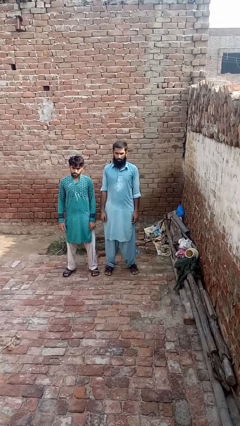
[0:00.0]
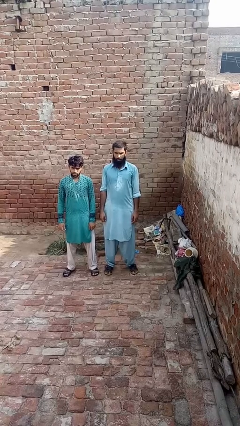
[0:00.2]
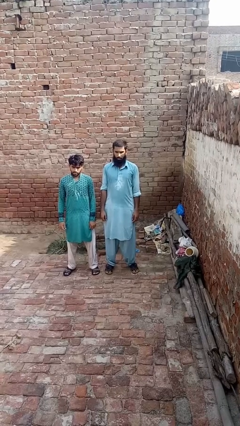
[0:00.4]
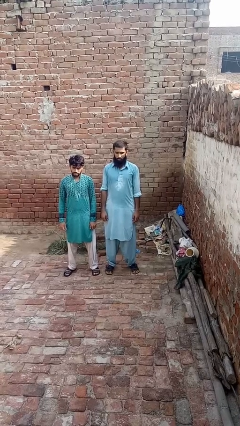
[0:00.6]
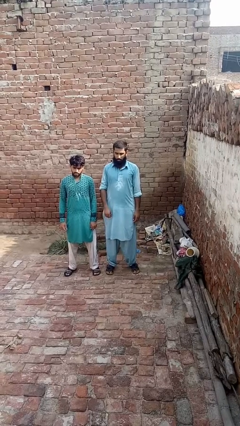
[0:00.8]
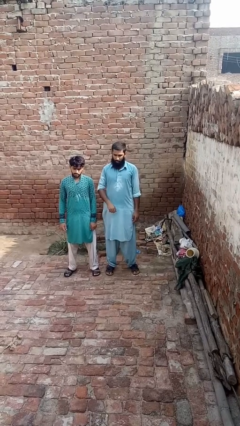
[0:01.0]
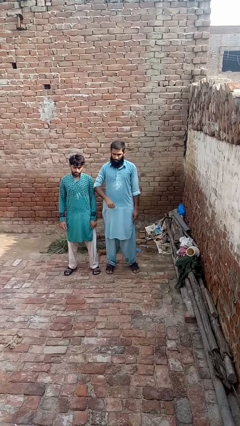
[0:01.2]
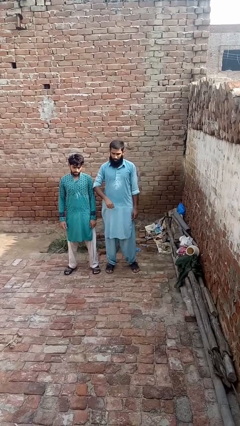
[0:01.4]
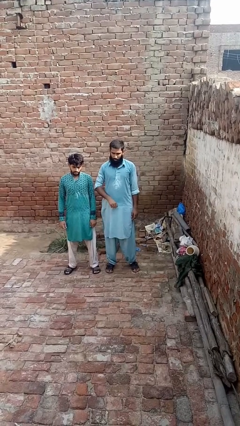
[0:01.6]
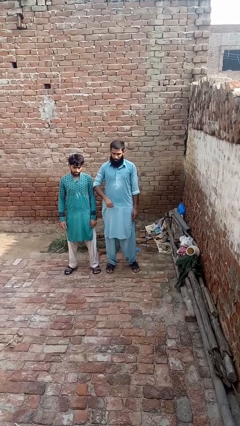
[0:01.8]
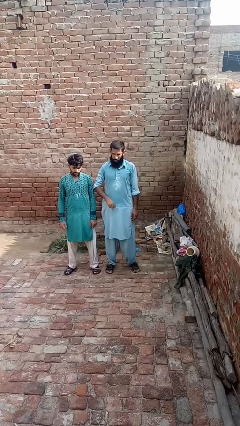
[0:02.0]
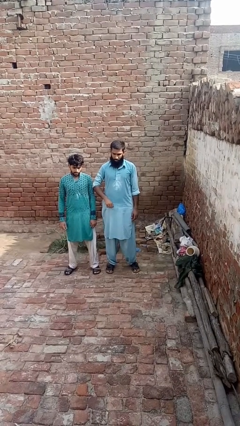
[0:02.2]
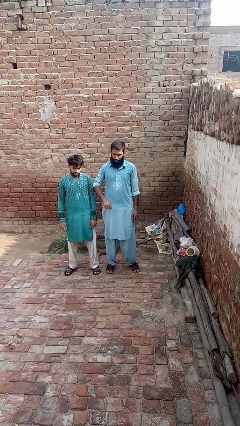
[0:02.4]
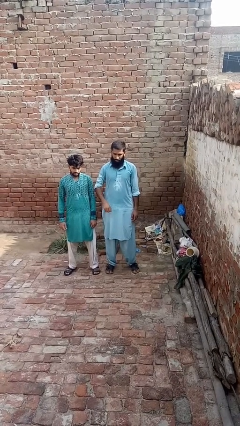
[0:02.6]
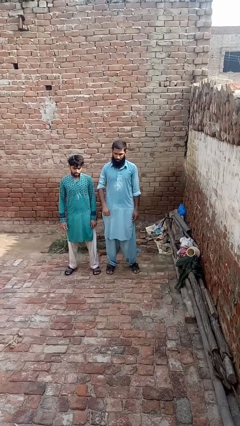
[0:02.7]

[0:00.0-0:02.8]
person nudges person with elbow

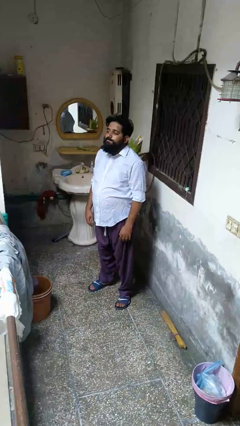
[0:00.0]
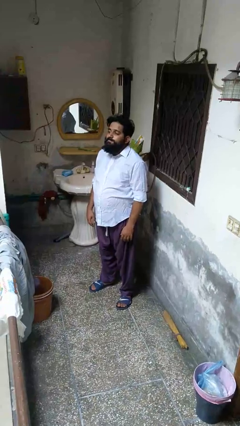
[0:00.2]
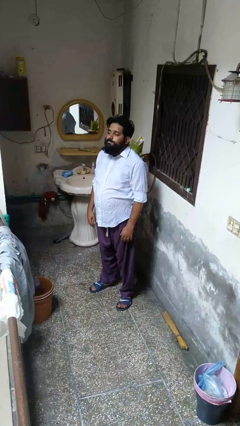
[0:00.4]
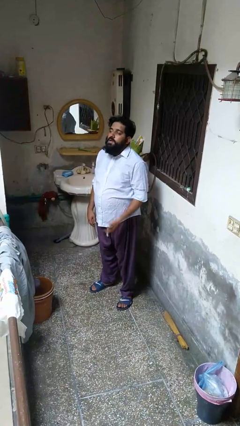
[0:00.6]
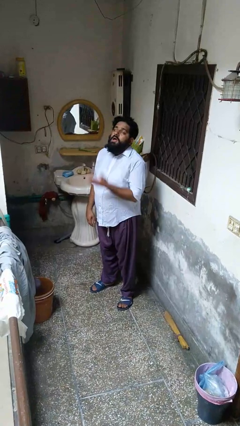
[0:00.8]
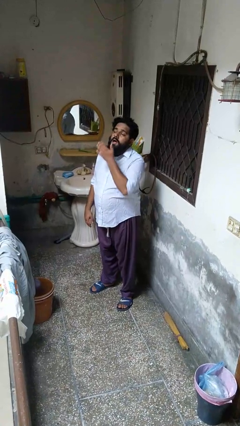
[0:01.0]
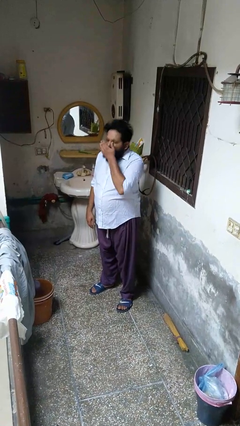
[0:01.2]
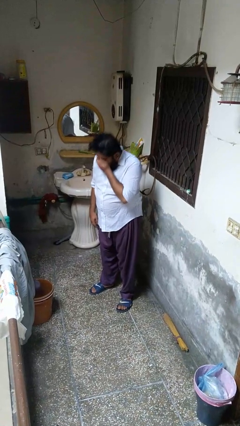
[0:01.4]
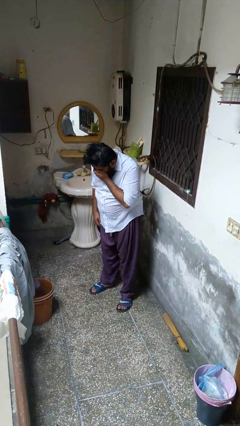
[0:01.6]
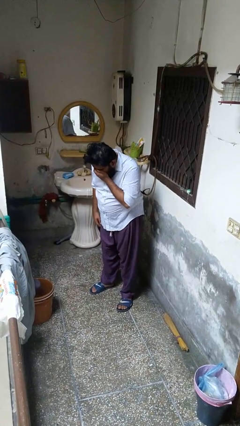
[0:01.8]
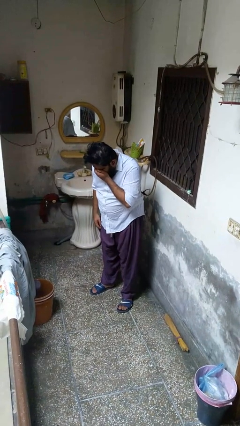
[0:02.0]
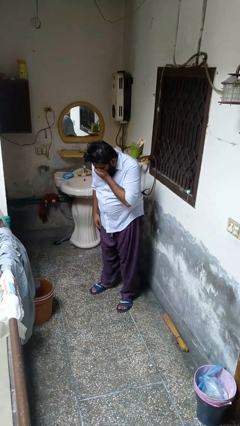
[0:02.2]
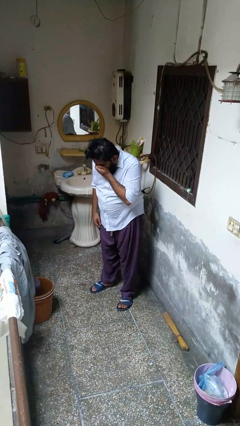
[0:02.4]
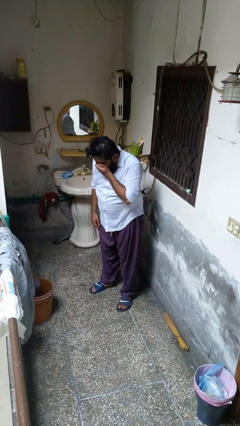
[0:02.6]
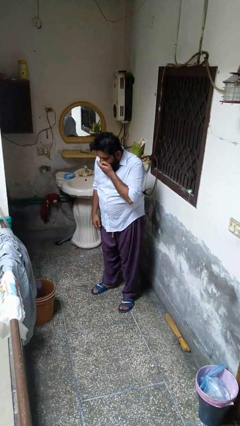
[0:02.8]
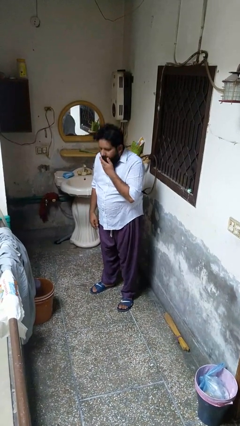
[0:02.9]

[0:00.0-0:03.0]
person sneezes into hand

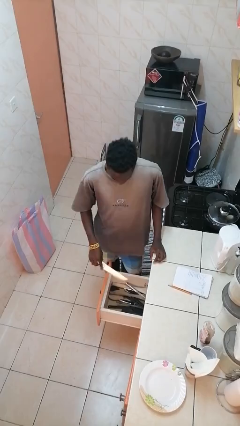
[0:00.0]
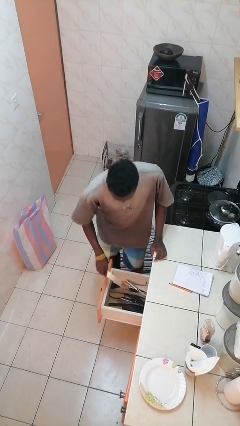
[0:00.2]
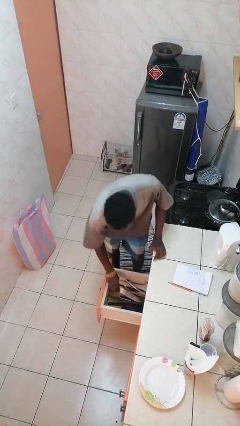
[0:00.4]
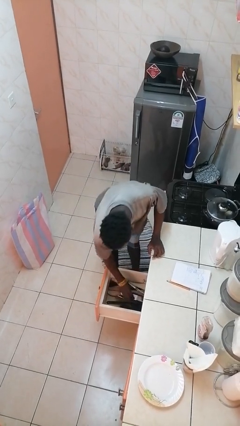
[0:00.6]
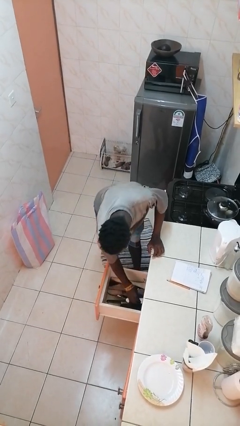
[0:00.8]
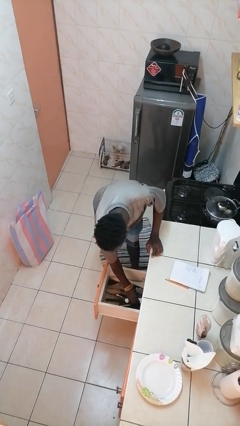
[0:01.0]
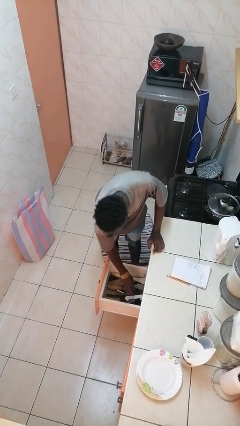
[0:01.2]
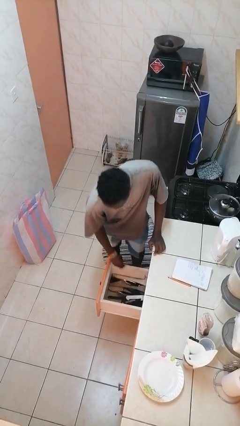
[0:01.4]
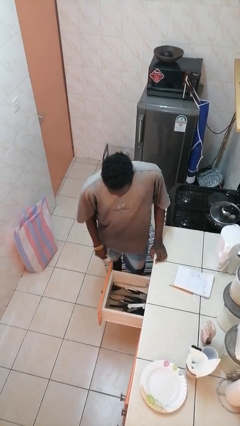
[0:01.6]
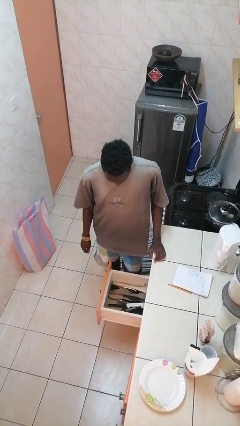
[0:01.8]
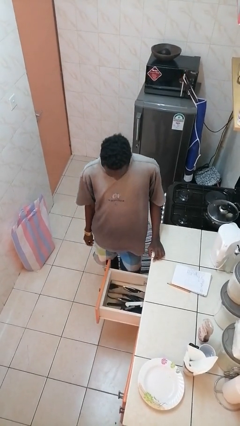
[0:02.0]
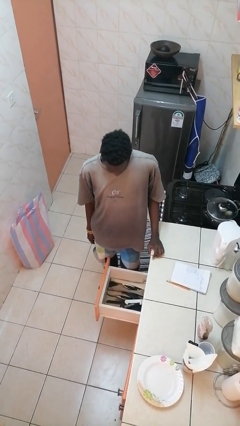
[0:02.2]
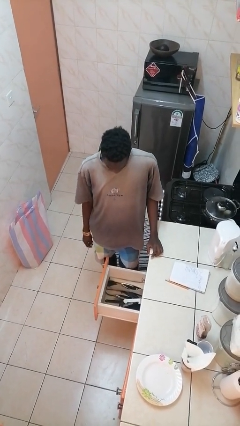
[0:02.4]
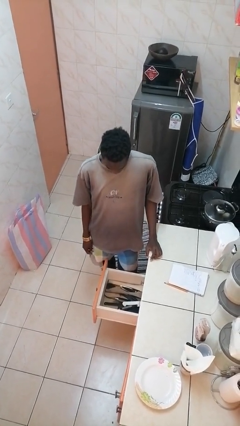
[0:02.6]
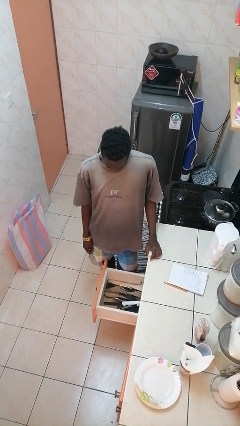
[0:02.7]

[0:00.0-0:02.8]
person puts object into kitchen drawer

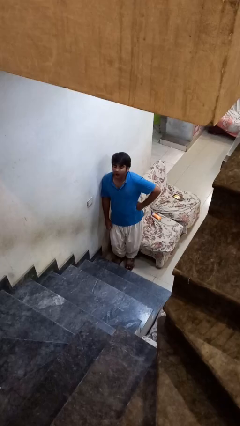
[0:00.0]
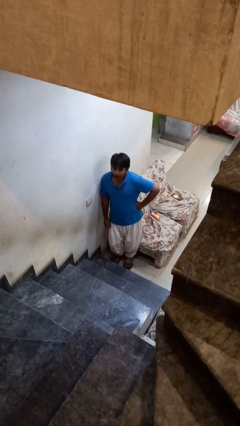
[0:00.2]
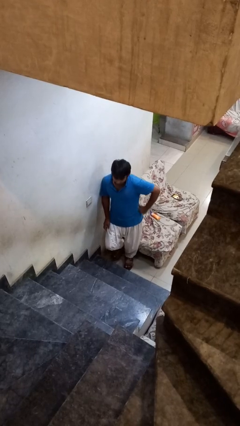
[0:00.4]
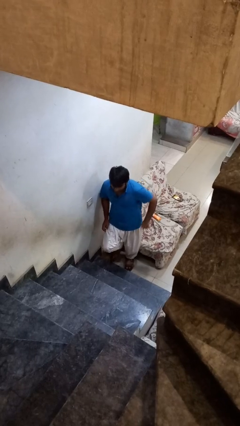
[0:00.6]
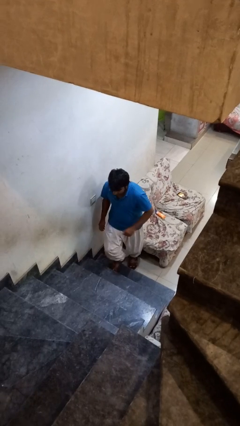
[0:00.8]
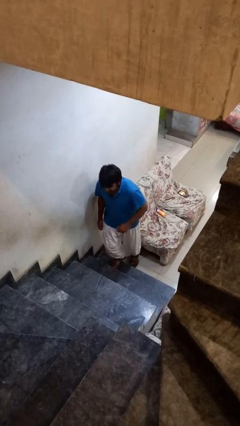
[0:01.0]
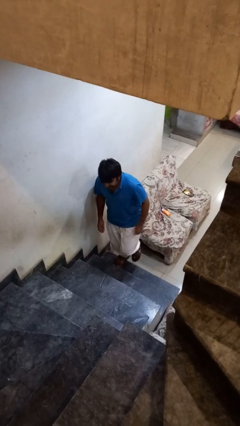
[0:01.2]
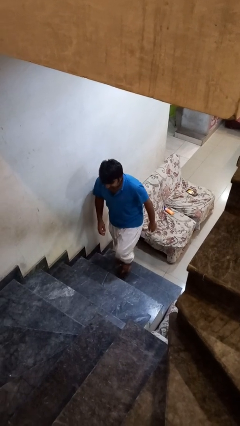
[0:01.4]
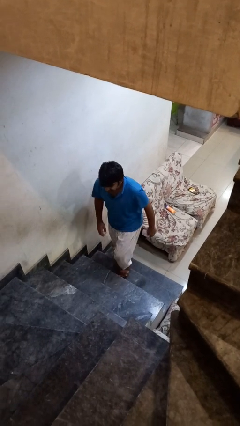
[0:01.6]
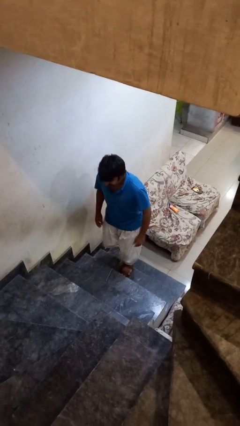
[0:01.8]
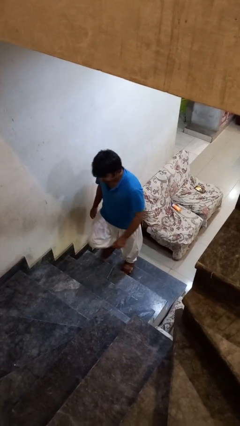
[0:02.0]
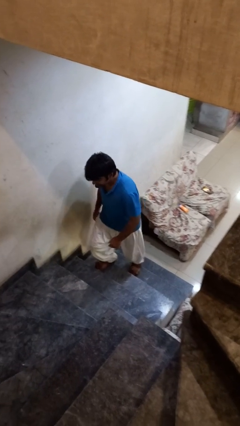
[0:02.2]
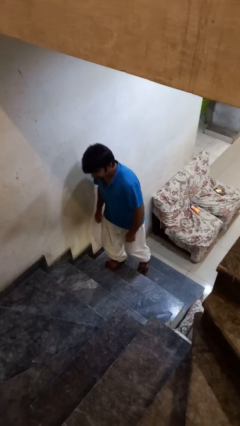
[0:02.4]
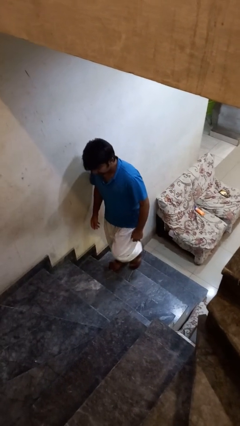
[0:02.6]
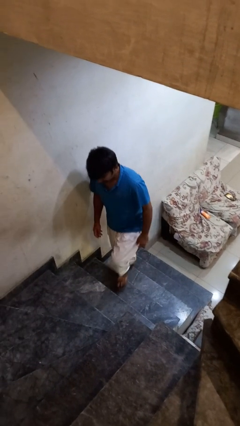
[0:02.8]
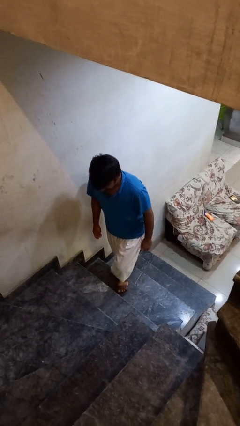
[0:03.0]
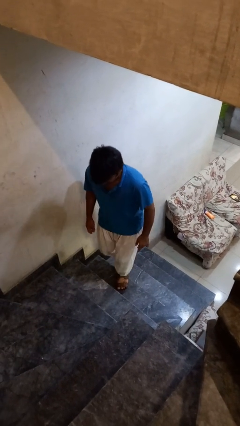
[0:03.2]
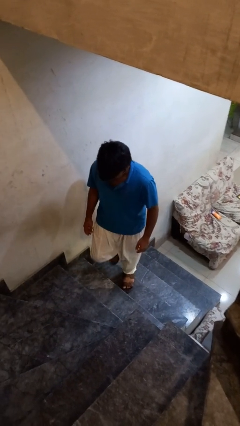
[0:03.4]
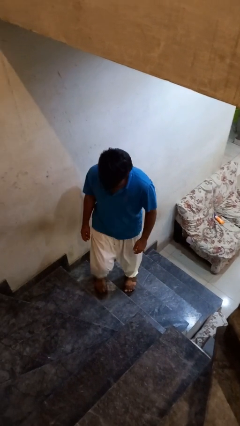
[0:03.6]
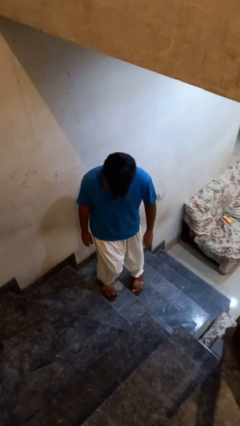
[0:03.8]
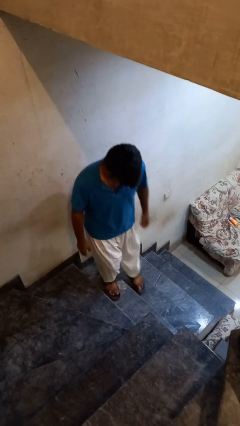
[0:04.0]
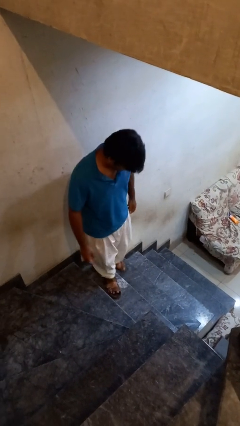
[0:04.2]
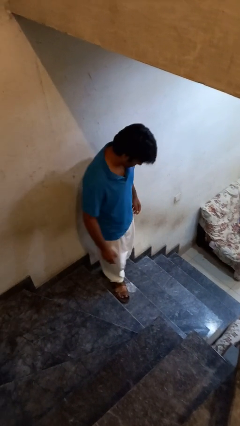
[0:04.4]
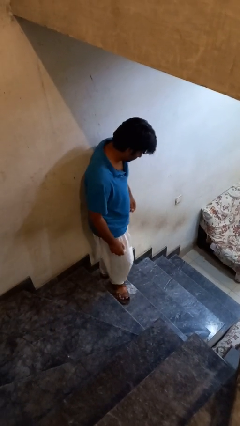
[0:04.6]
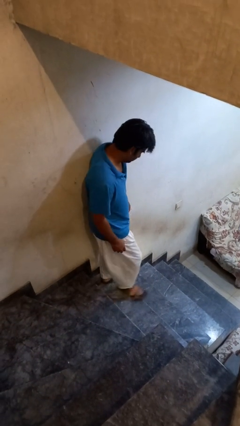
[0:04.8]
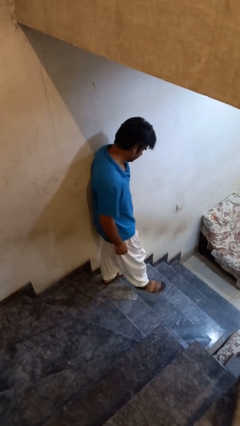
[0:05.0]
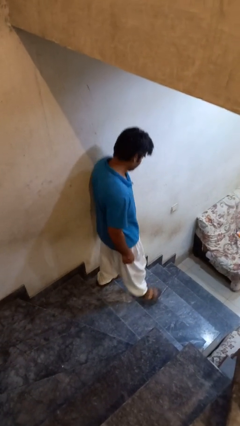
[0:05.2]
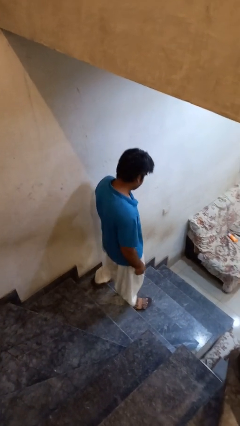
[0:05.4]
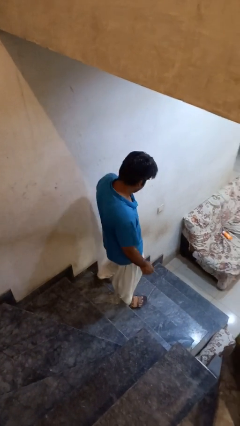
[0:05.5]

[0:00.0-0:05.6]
person climbs up stairs

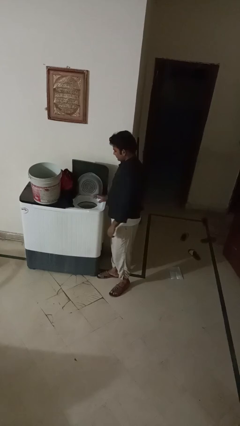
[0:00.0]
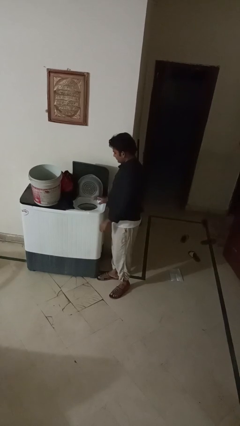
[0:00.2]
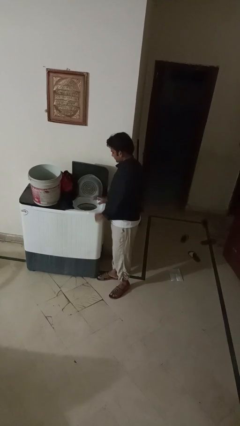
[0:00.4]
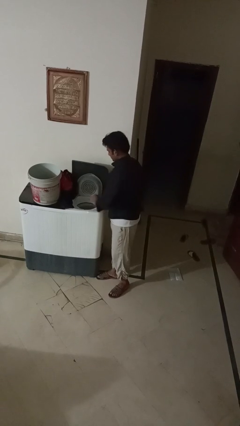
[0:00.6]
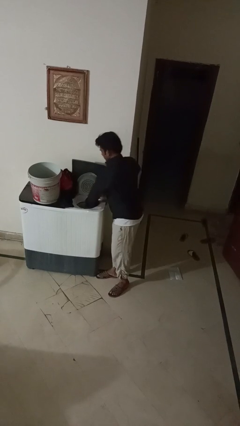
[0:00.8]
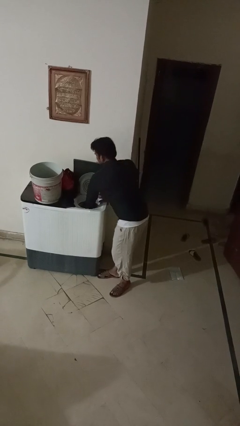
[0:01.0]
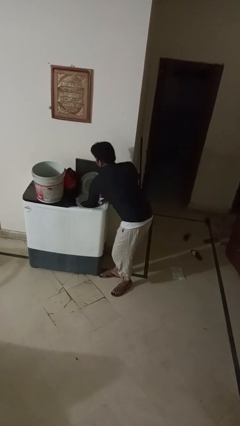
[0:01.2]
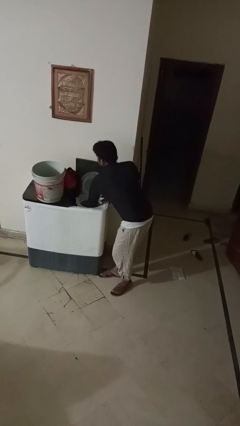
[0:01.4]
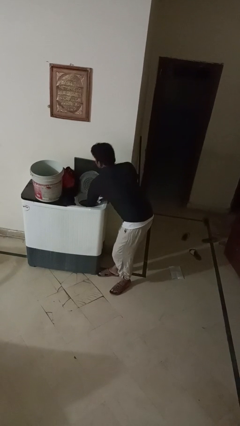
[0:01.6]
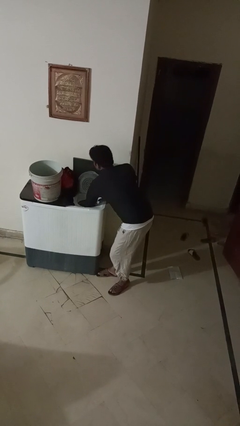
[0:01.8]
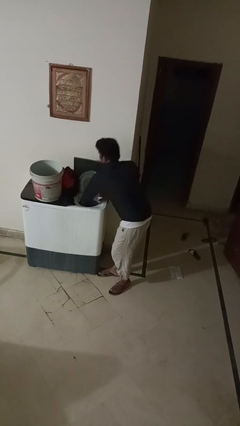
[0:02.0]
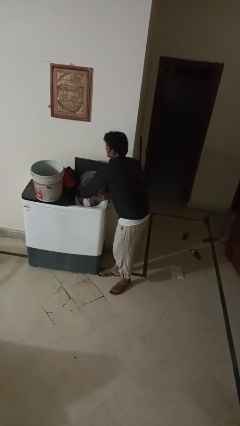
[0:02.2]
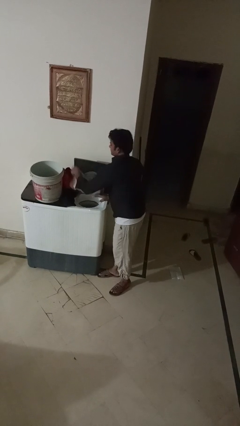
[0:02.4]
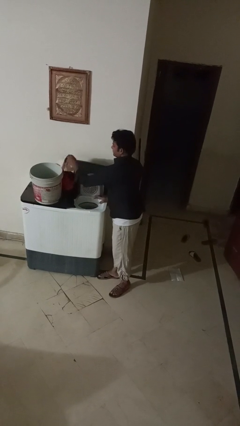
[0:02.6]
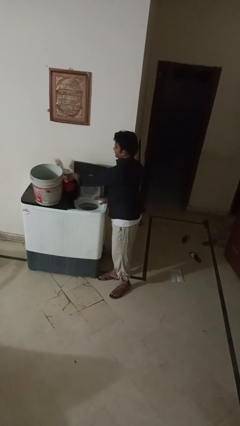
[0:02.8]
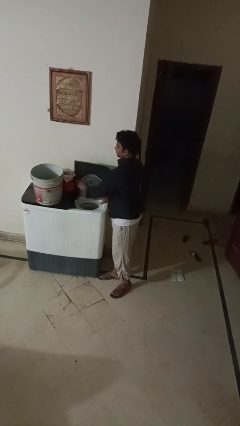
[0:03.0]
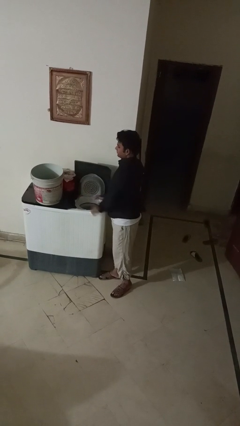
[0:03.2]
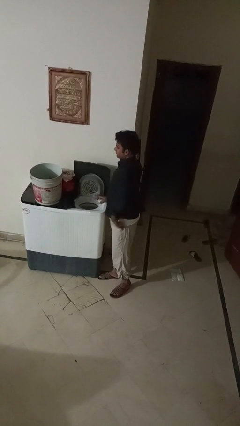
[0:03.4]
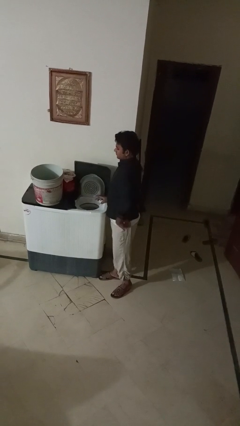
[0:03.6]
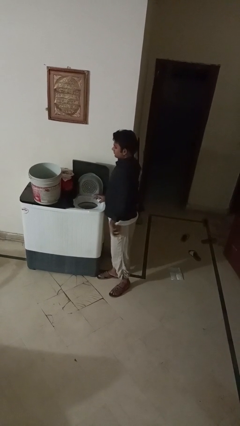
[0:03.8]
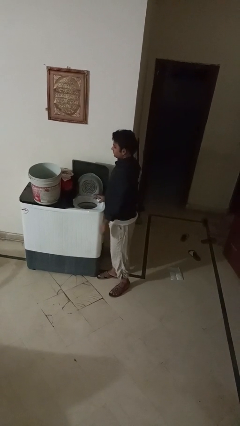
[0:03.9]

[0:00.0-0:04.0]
person unloads dryer
